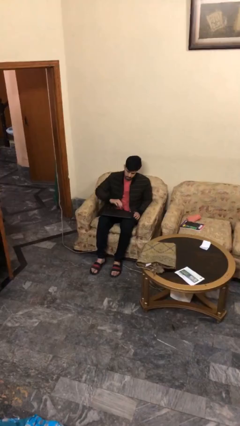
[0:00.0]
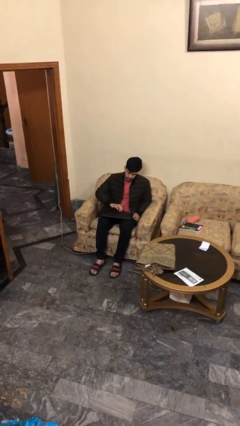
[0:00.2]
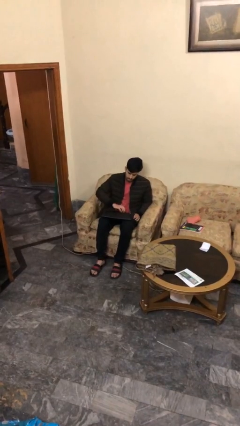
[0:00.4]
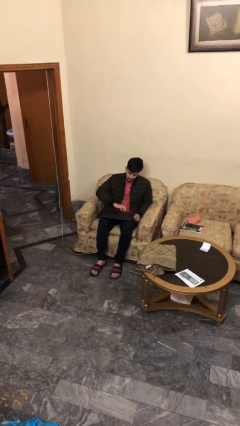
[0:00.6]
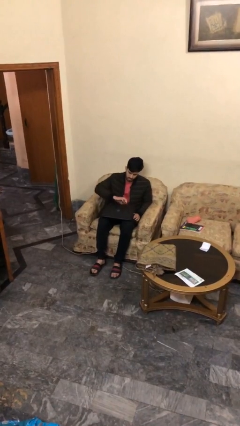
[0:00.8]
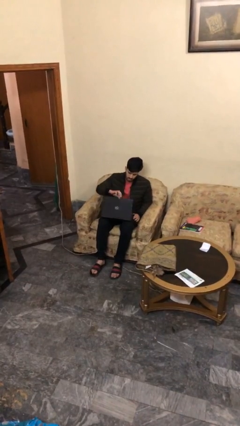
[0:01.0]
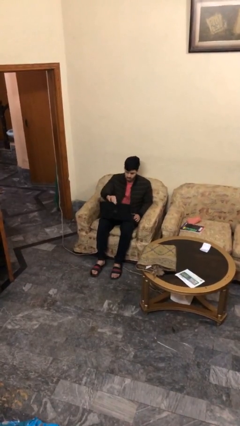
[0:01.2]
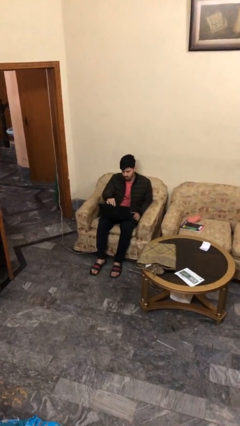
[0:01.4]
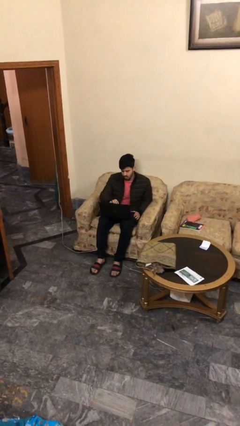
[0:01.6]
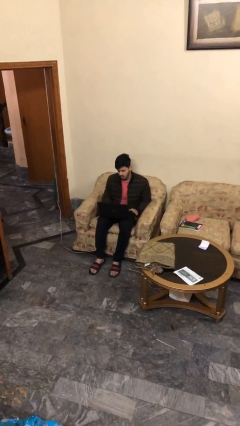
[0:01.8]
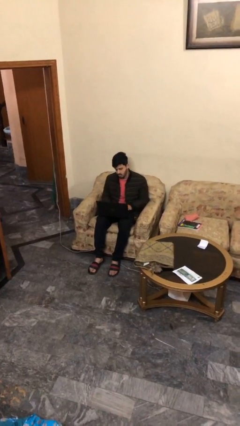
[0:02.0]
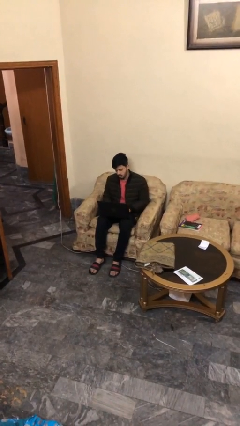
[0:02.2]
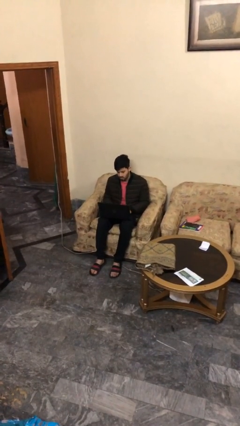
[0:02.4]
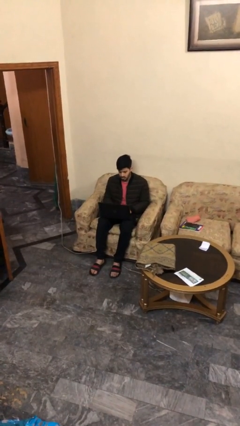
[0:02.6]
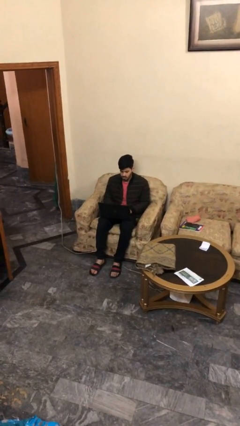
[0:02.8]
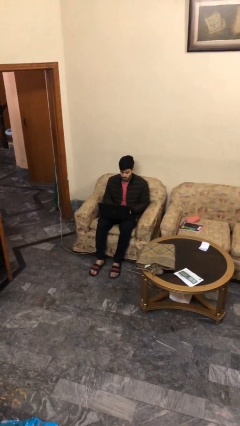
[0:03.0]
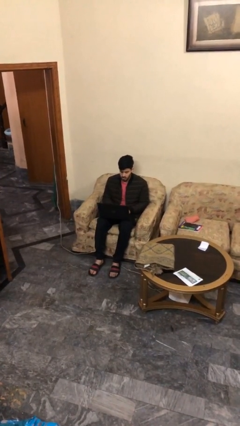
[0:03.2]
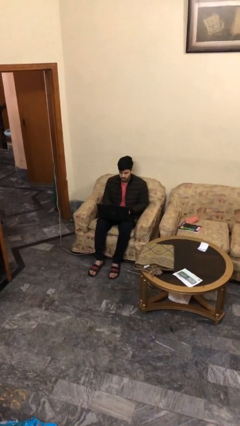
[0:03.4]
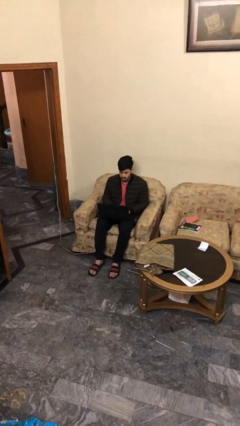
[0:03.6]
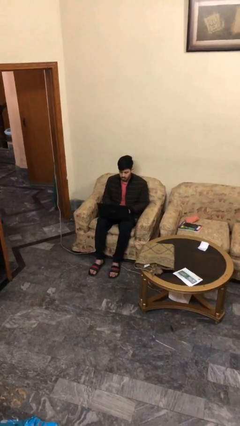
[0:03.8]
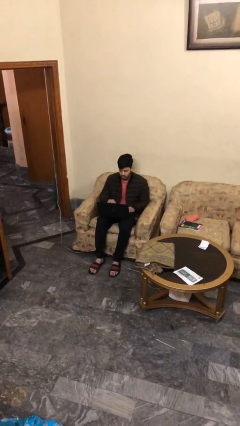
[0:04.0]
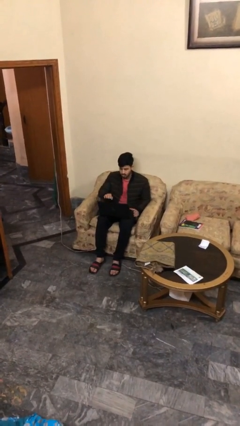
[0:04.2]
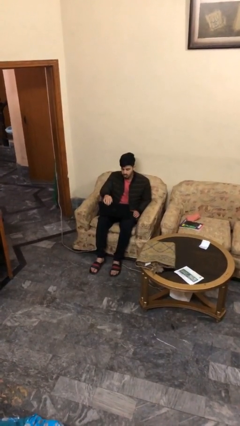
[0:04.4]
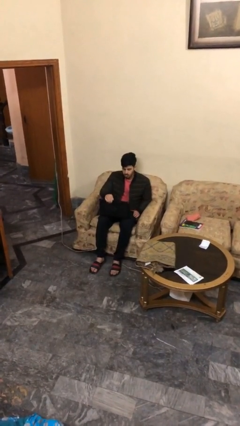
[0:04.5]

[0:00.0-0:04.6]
person interacts with laptop

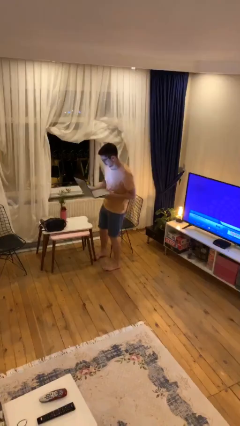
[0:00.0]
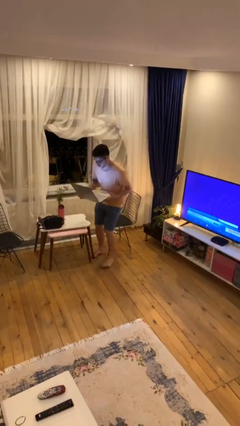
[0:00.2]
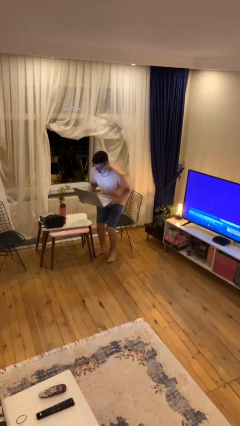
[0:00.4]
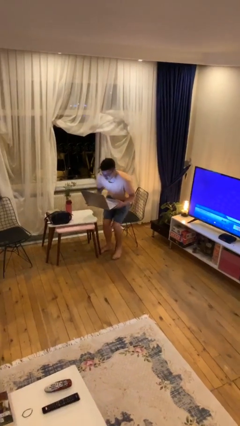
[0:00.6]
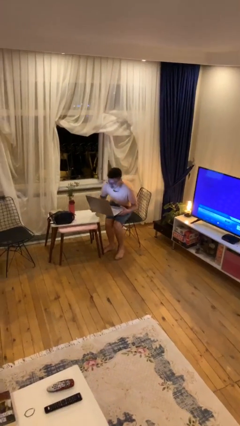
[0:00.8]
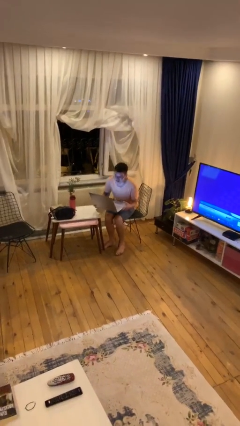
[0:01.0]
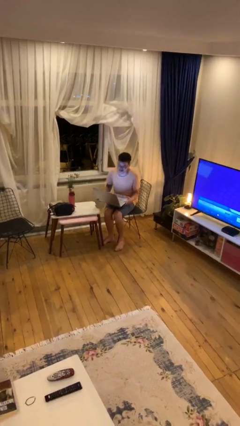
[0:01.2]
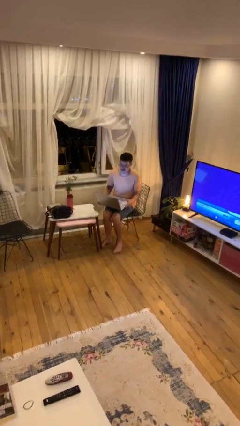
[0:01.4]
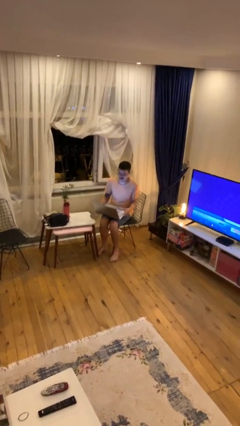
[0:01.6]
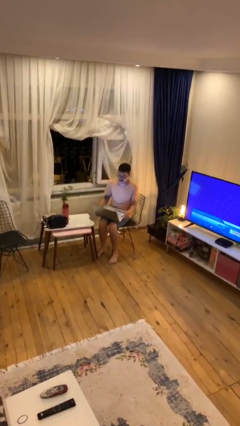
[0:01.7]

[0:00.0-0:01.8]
person sits down

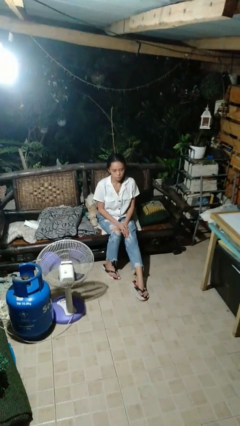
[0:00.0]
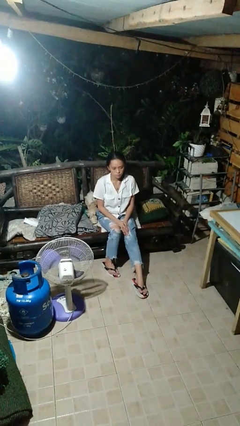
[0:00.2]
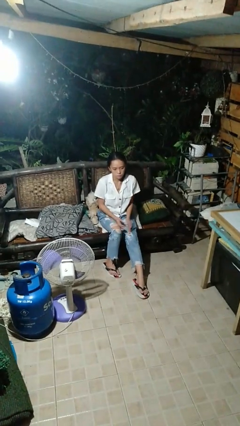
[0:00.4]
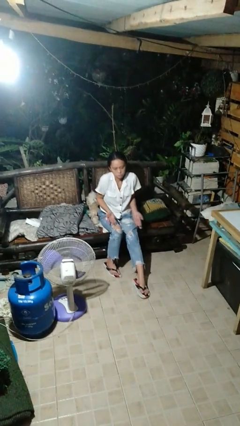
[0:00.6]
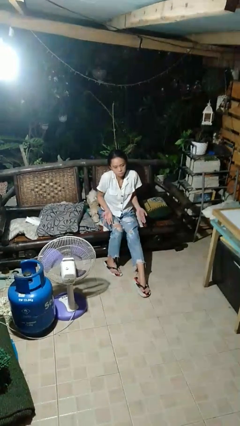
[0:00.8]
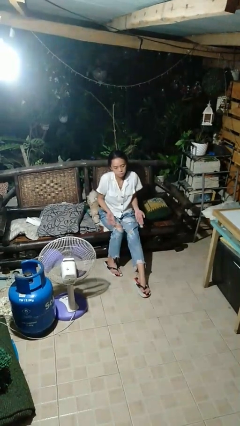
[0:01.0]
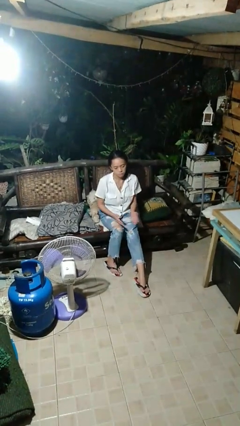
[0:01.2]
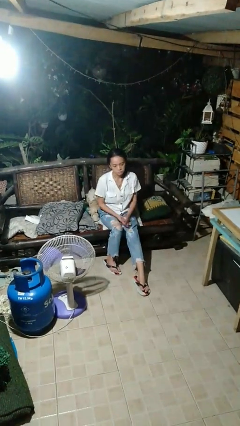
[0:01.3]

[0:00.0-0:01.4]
person shrugs

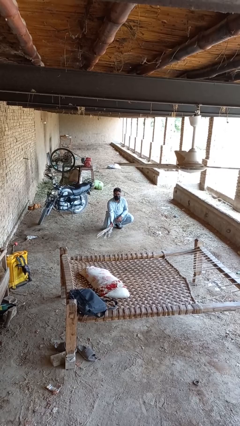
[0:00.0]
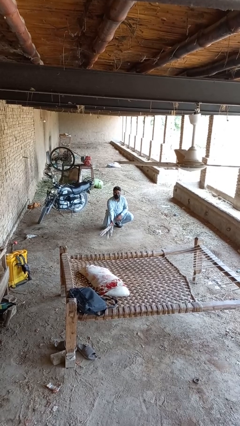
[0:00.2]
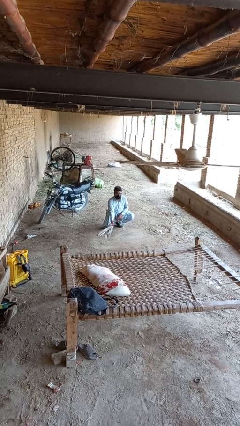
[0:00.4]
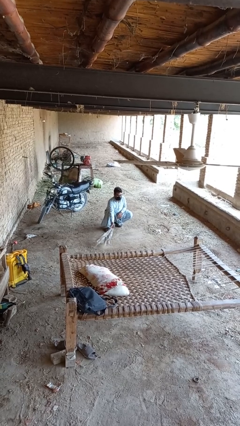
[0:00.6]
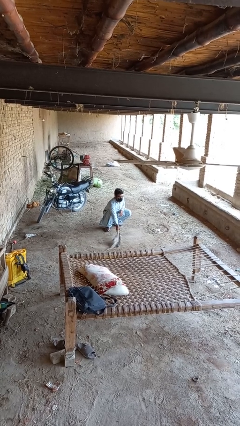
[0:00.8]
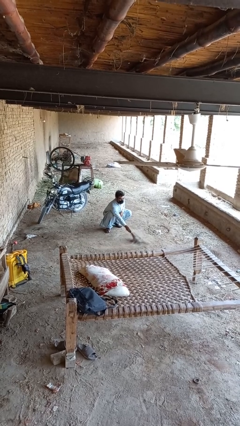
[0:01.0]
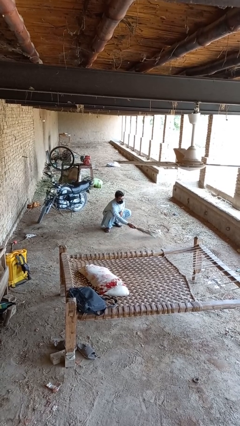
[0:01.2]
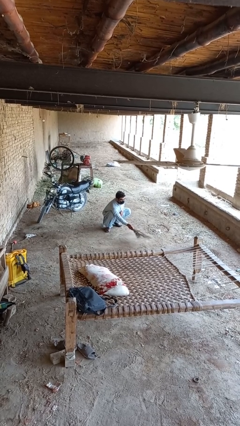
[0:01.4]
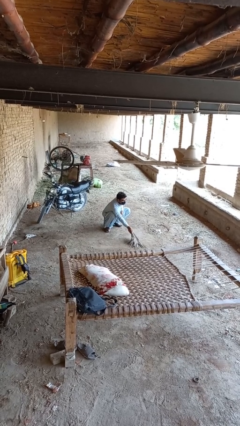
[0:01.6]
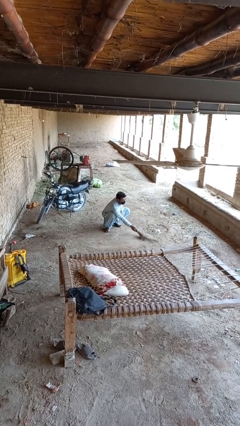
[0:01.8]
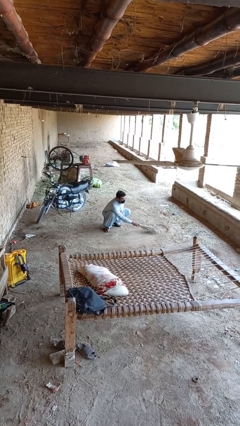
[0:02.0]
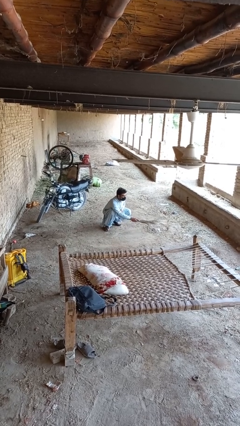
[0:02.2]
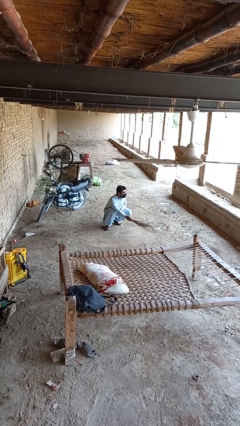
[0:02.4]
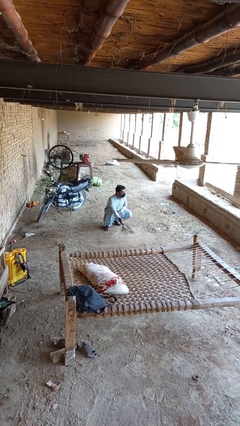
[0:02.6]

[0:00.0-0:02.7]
person sweeps floor

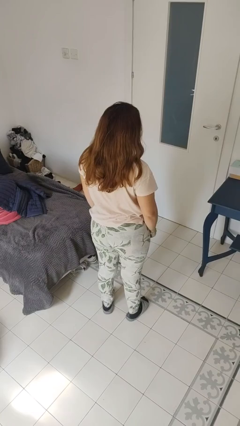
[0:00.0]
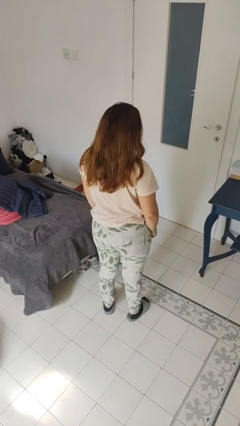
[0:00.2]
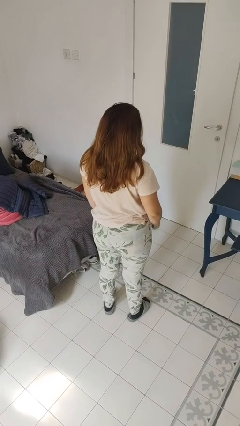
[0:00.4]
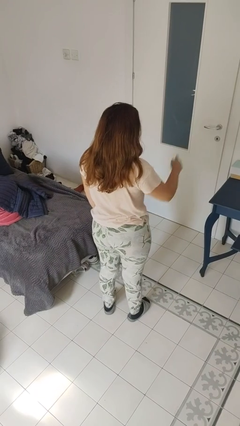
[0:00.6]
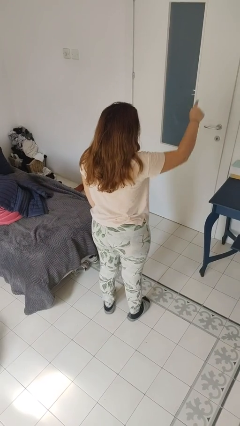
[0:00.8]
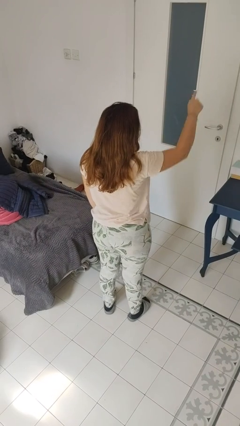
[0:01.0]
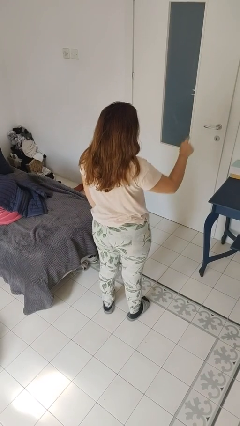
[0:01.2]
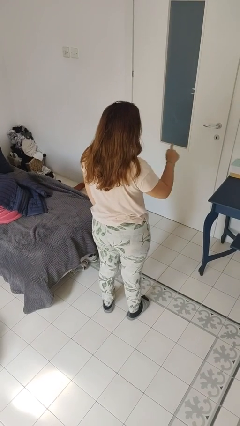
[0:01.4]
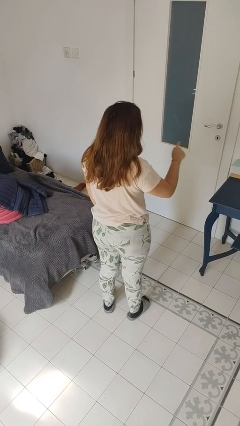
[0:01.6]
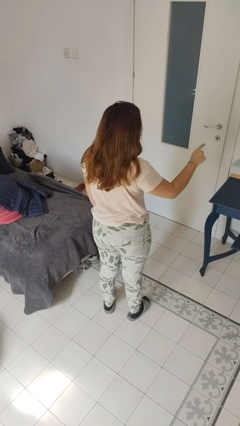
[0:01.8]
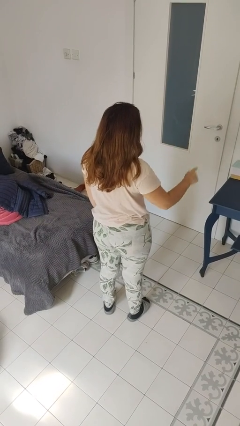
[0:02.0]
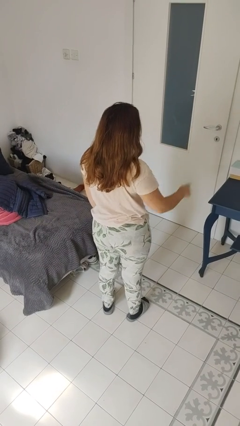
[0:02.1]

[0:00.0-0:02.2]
person gestures number one

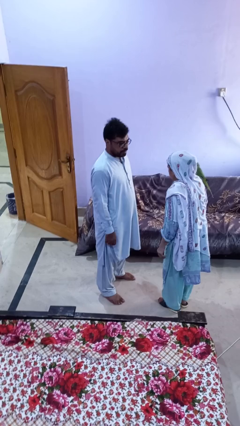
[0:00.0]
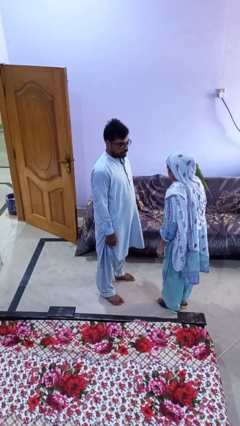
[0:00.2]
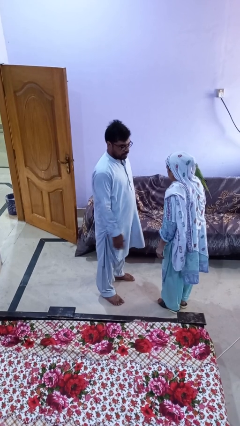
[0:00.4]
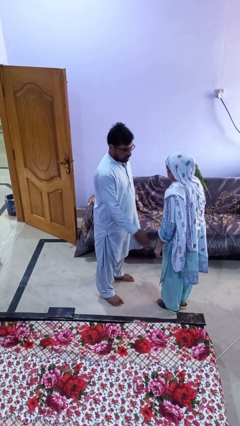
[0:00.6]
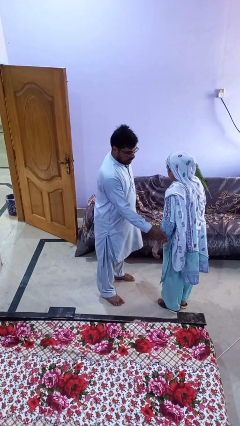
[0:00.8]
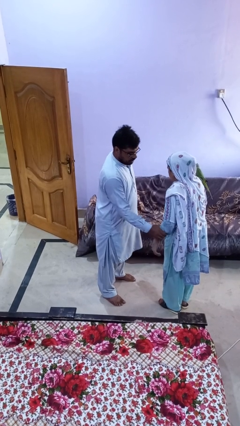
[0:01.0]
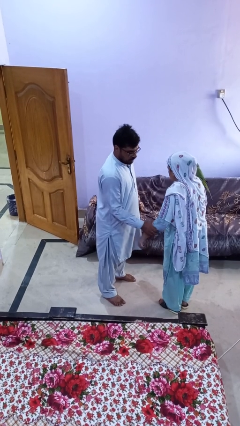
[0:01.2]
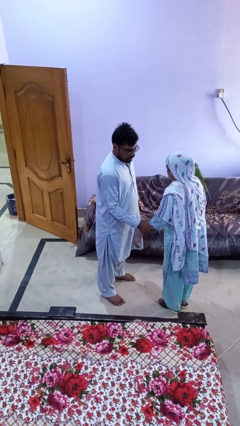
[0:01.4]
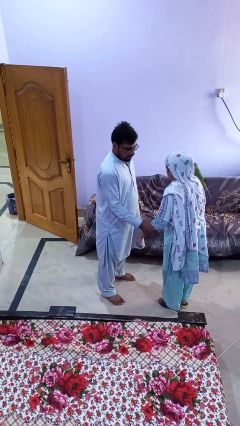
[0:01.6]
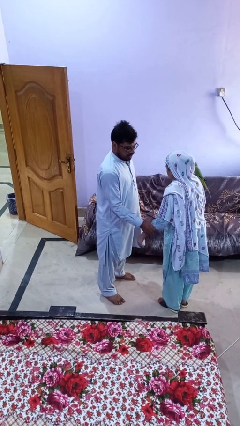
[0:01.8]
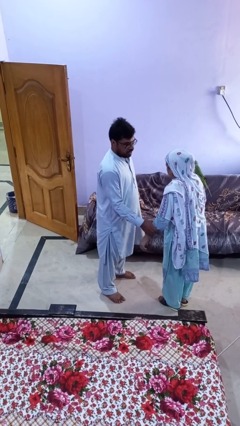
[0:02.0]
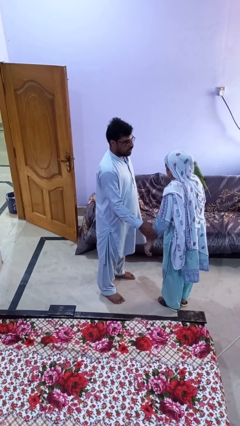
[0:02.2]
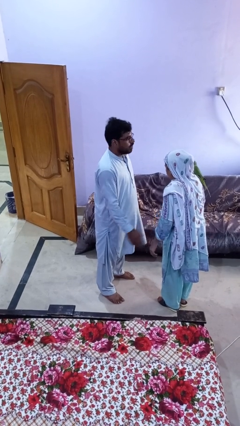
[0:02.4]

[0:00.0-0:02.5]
person grabs person by forearm

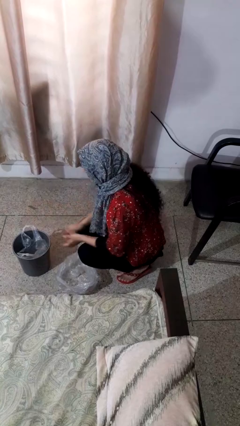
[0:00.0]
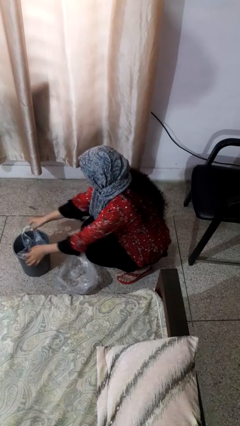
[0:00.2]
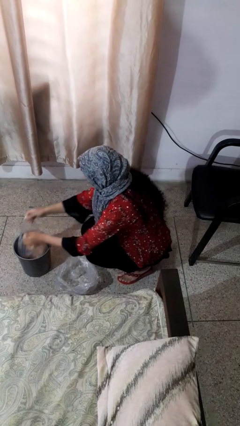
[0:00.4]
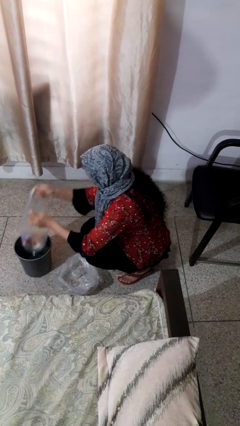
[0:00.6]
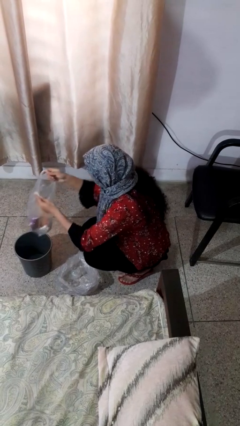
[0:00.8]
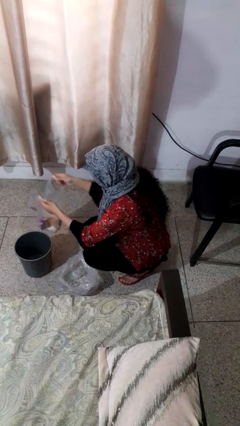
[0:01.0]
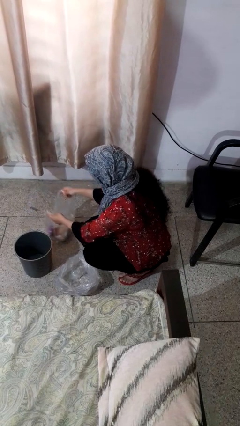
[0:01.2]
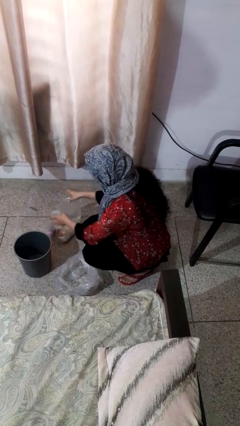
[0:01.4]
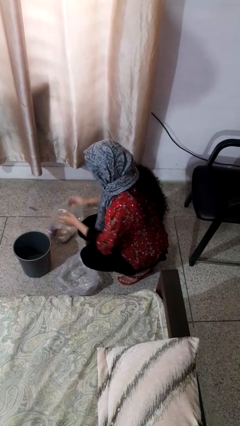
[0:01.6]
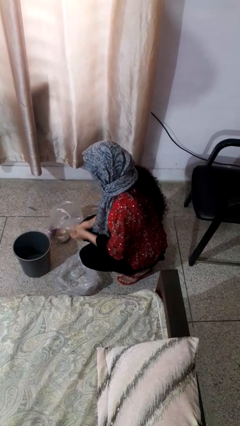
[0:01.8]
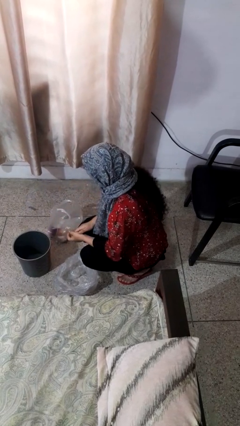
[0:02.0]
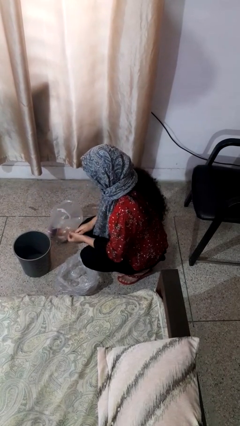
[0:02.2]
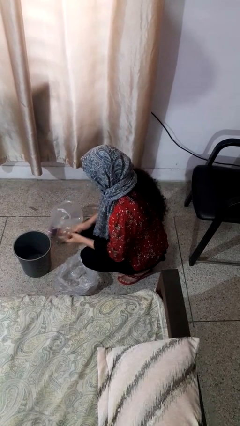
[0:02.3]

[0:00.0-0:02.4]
person removes trashbag from trashcan
